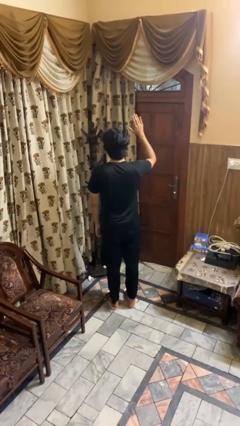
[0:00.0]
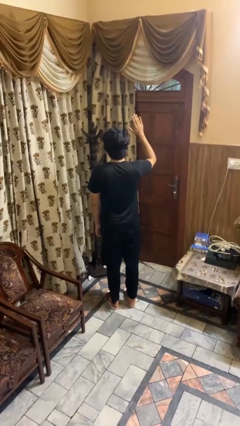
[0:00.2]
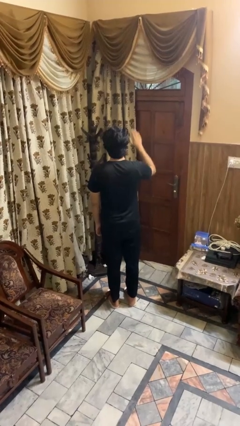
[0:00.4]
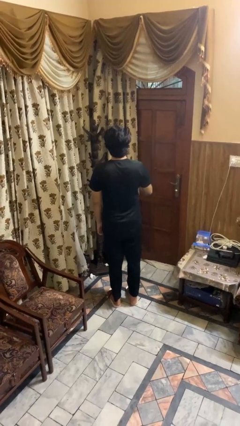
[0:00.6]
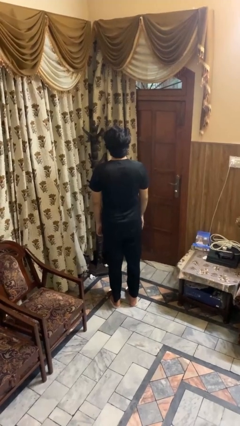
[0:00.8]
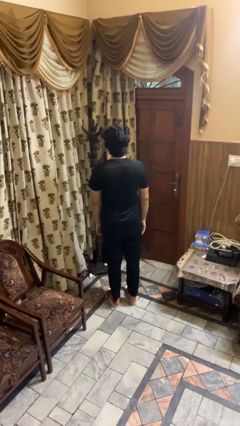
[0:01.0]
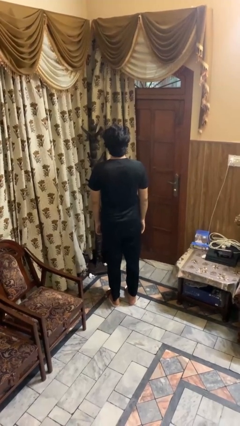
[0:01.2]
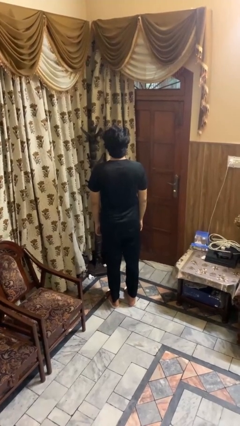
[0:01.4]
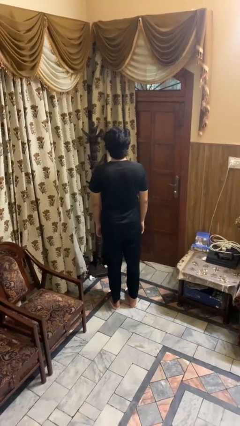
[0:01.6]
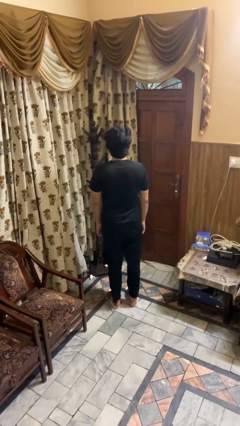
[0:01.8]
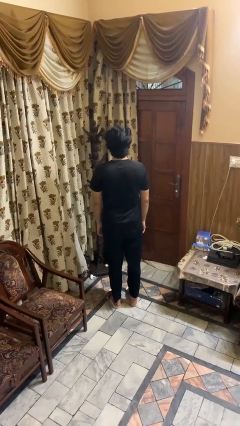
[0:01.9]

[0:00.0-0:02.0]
person gestures lower hand

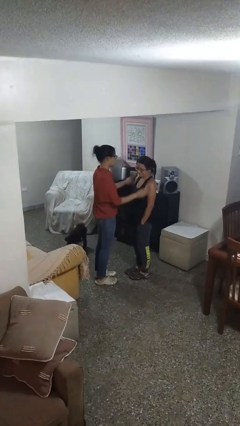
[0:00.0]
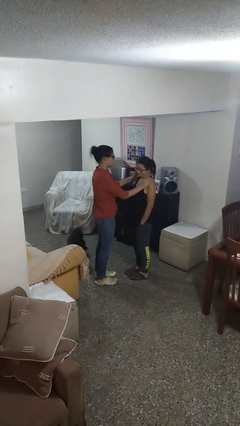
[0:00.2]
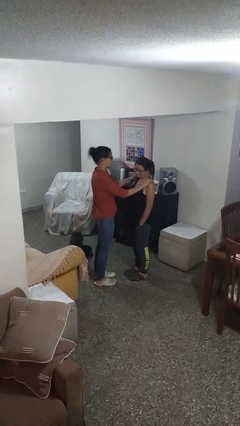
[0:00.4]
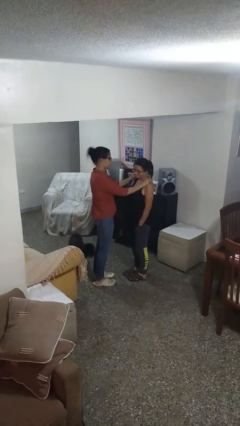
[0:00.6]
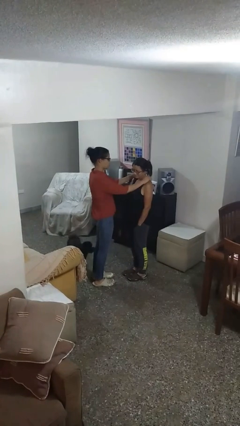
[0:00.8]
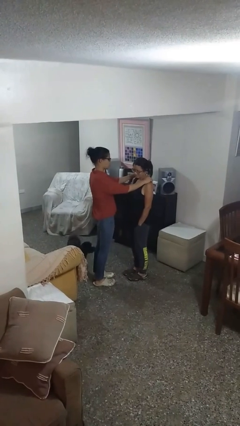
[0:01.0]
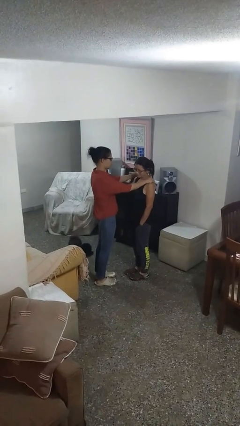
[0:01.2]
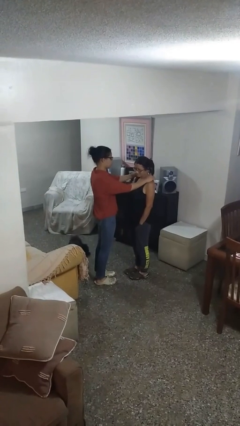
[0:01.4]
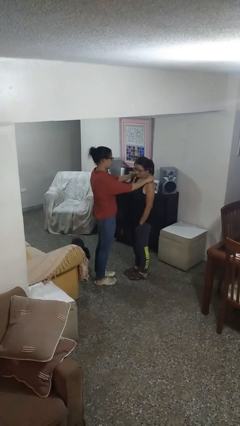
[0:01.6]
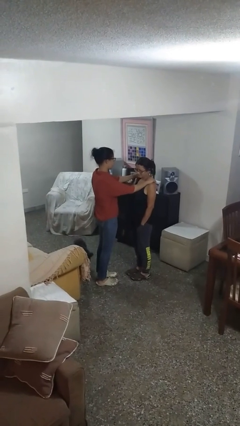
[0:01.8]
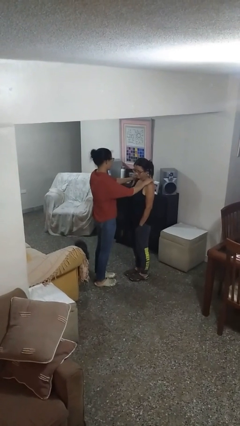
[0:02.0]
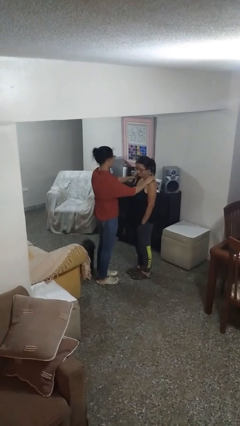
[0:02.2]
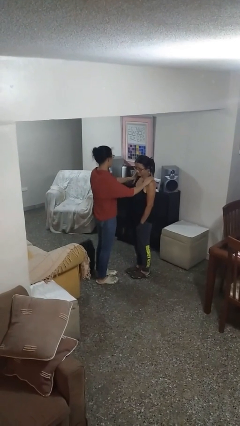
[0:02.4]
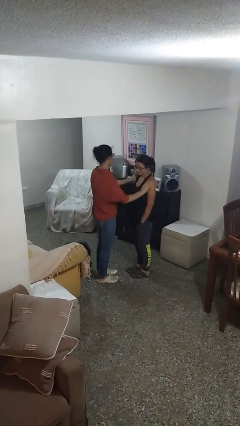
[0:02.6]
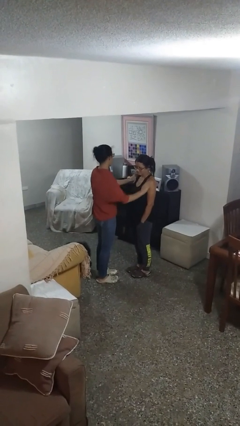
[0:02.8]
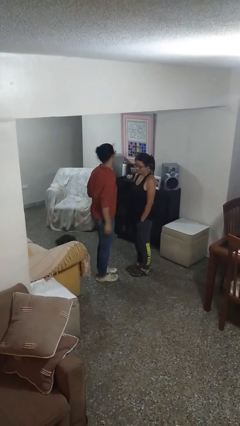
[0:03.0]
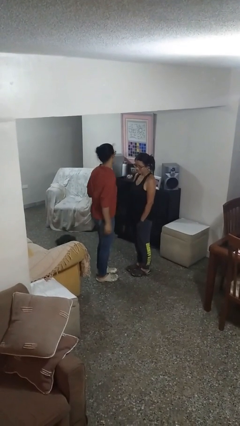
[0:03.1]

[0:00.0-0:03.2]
person pounds shoulders of person

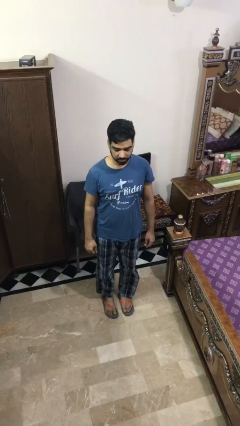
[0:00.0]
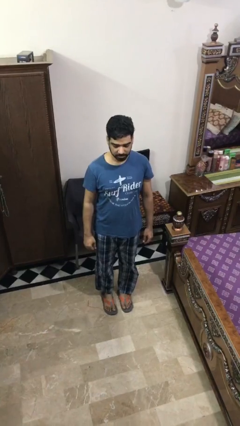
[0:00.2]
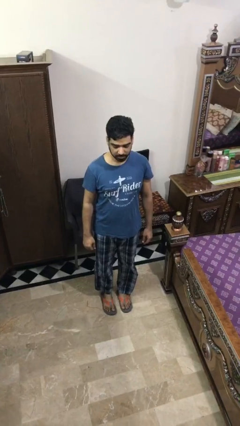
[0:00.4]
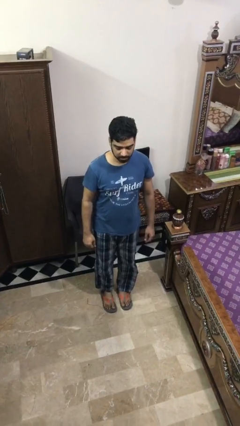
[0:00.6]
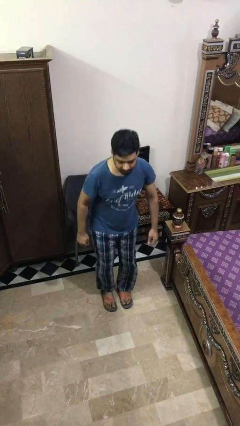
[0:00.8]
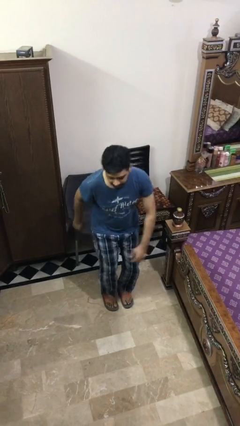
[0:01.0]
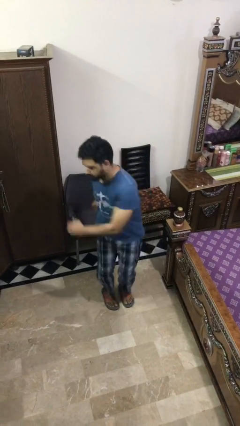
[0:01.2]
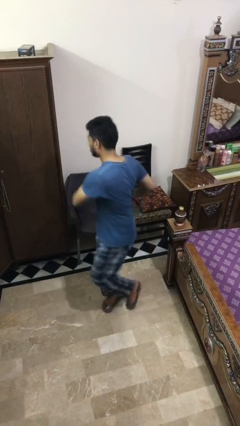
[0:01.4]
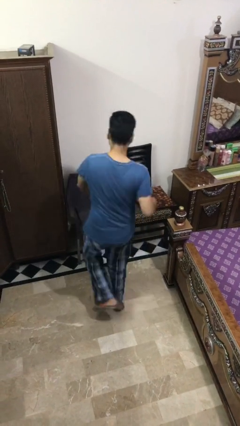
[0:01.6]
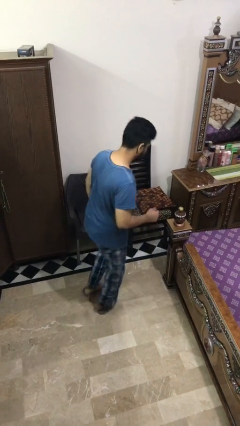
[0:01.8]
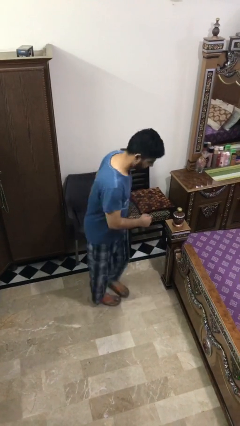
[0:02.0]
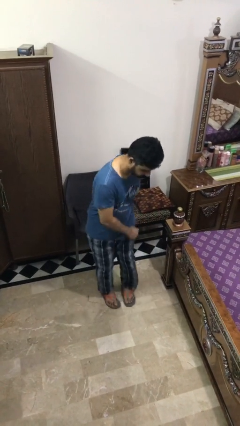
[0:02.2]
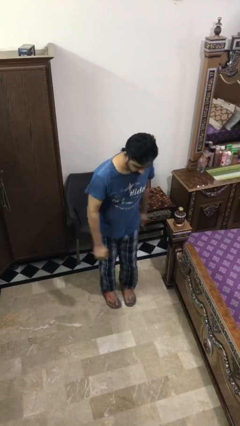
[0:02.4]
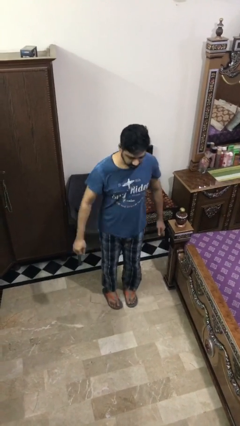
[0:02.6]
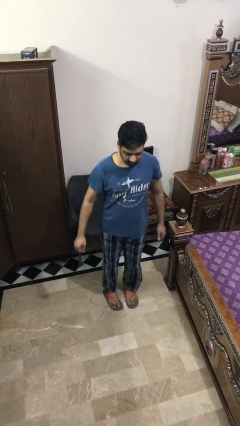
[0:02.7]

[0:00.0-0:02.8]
person twirls

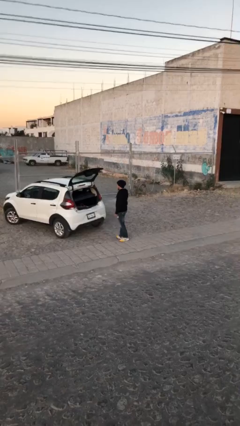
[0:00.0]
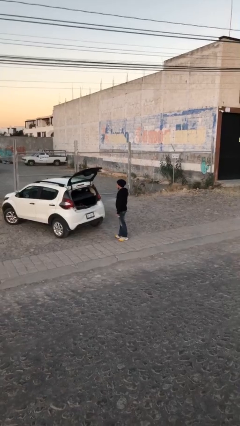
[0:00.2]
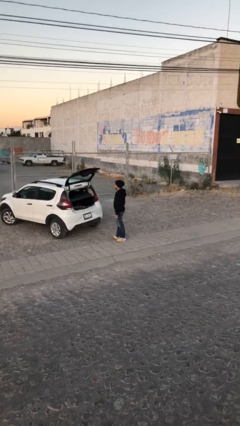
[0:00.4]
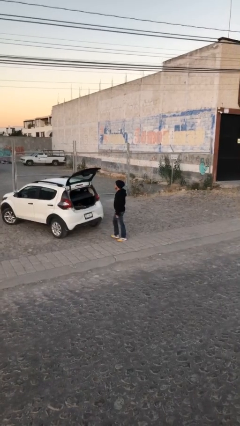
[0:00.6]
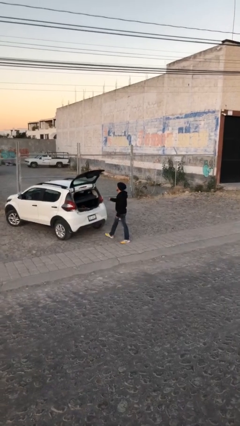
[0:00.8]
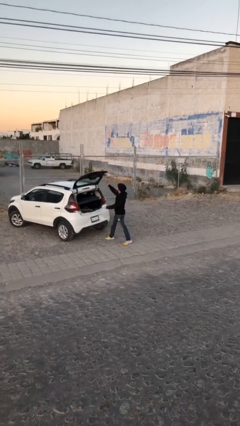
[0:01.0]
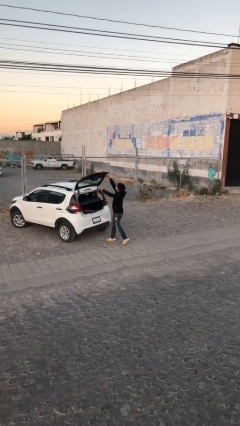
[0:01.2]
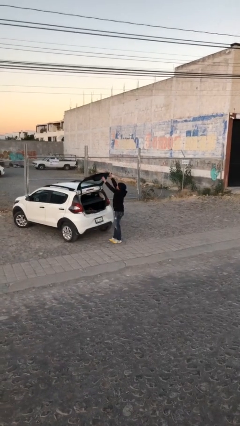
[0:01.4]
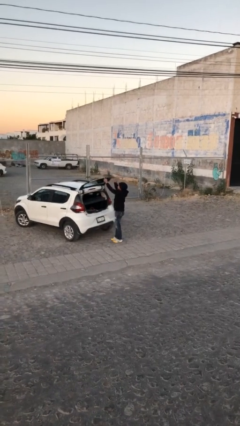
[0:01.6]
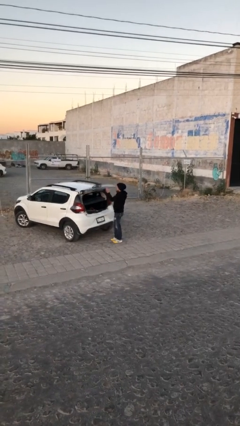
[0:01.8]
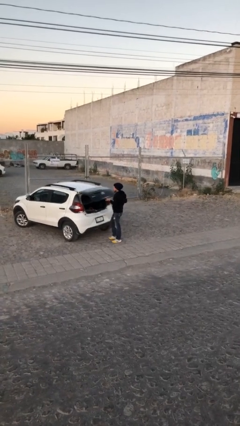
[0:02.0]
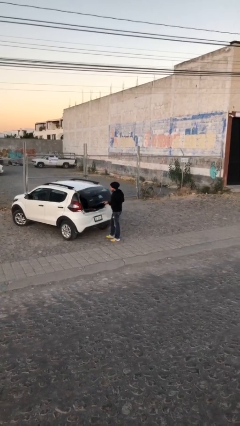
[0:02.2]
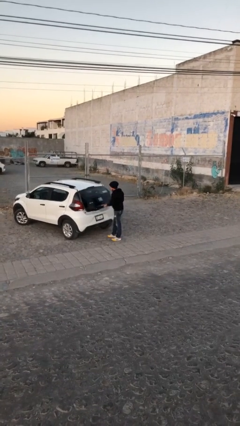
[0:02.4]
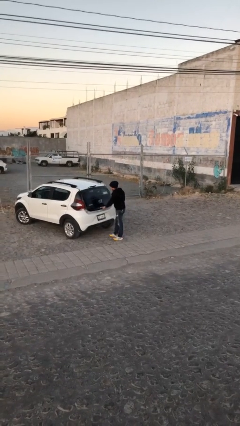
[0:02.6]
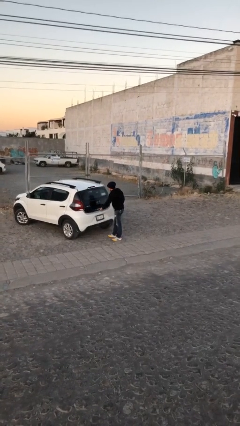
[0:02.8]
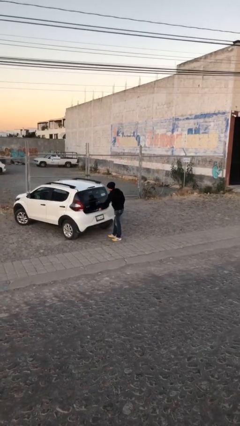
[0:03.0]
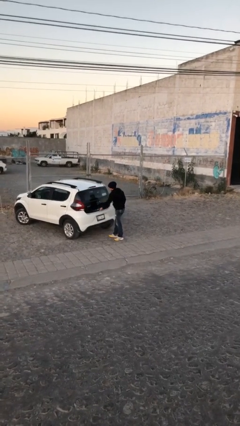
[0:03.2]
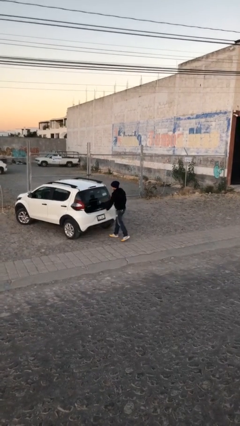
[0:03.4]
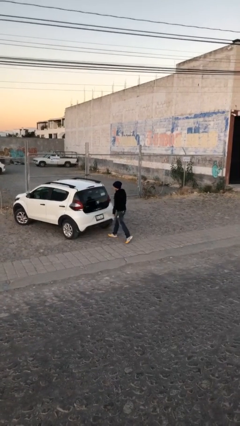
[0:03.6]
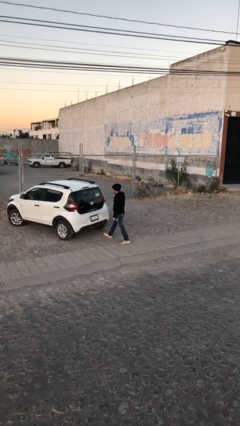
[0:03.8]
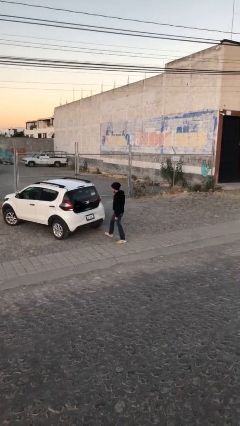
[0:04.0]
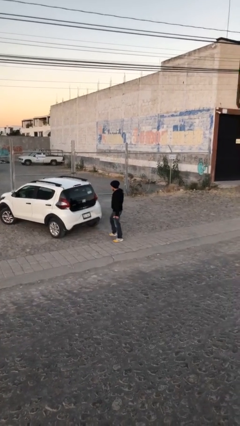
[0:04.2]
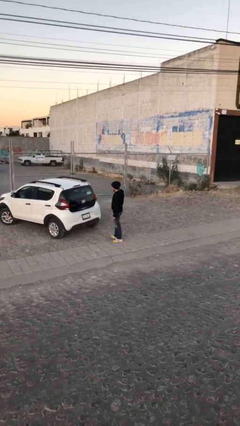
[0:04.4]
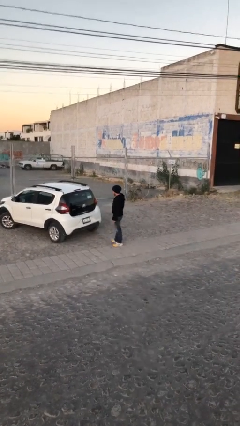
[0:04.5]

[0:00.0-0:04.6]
person closes car trunk

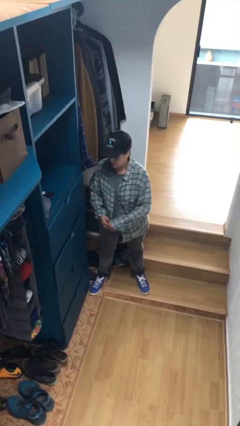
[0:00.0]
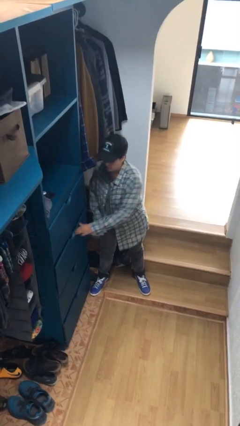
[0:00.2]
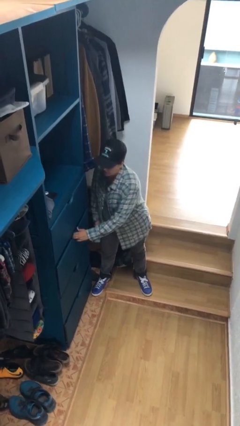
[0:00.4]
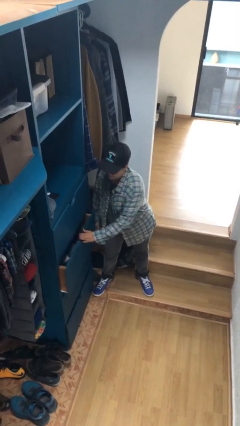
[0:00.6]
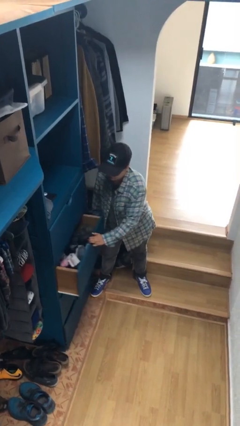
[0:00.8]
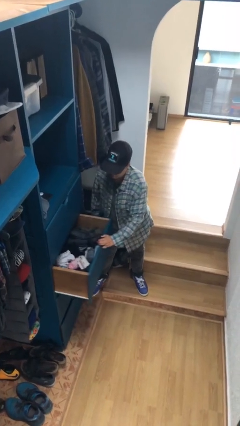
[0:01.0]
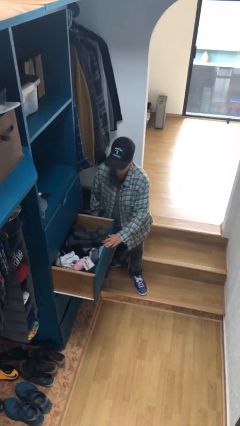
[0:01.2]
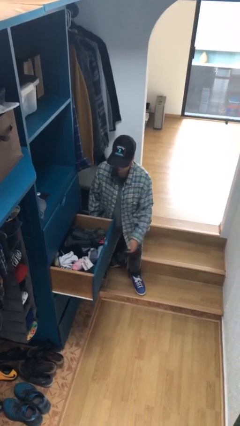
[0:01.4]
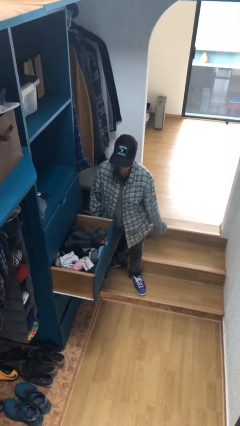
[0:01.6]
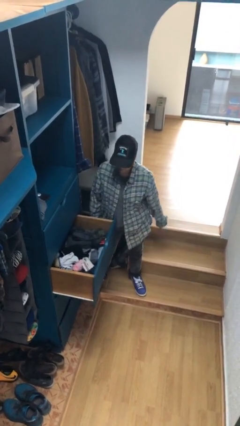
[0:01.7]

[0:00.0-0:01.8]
person opens dresser drawer

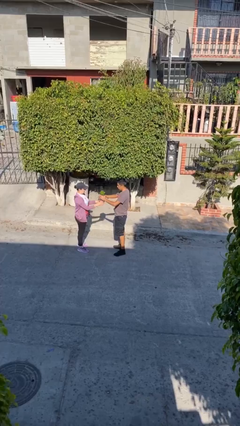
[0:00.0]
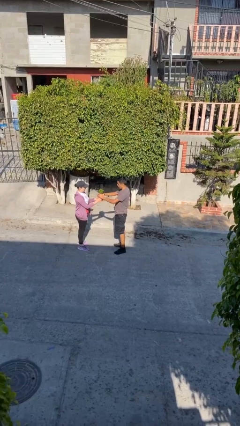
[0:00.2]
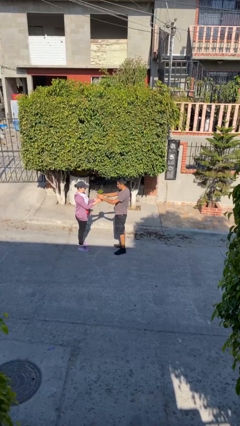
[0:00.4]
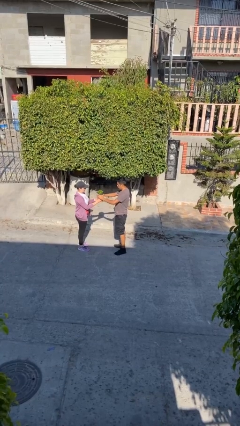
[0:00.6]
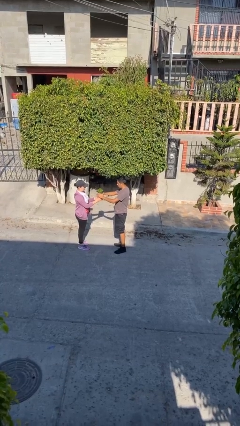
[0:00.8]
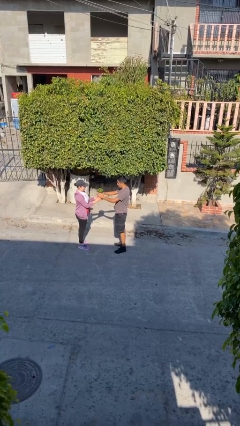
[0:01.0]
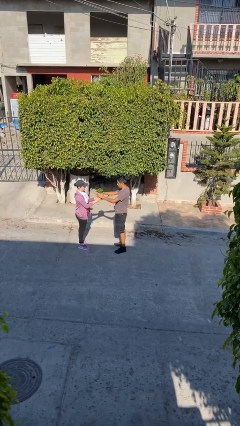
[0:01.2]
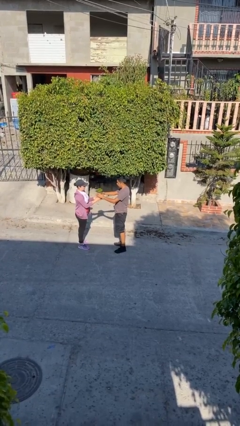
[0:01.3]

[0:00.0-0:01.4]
person transfers object to person

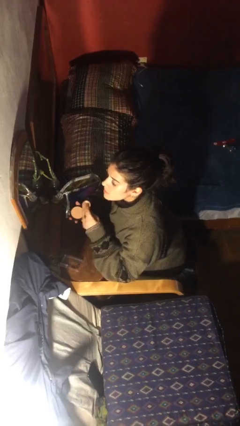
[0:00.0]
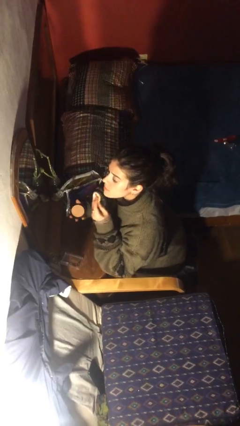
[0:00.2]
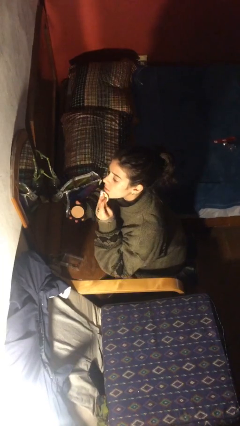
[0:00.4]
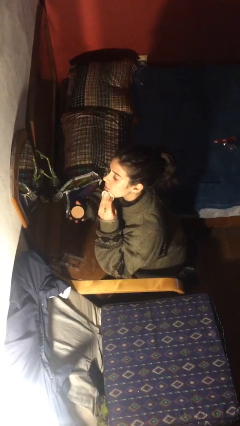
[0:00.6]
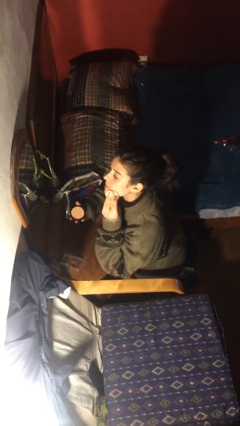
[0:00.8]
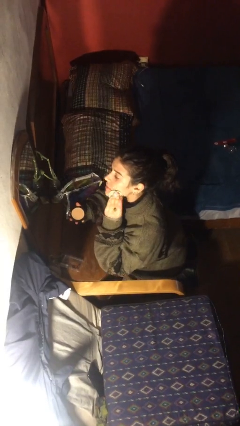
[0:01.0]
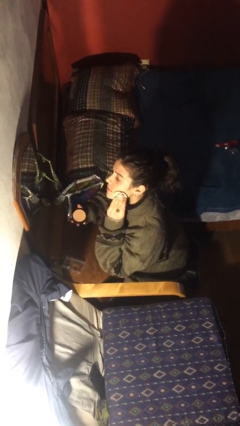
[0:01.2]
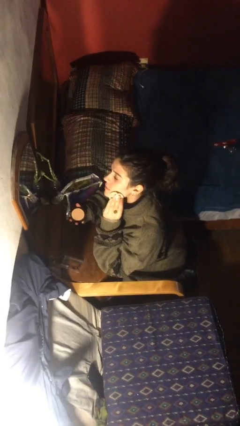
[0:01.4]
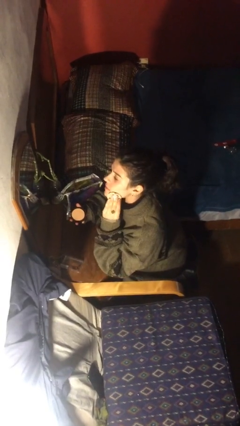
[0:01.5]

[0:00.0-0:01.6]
person applies foundation makeup
